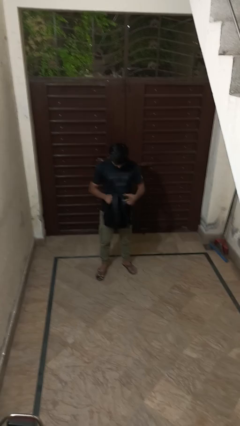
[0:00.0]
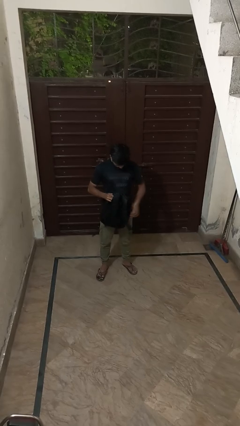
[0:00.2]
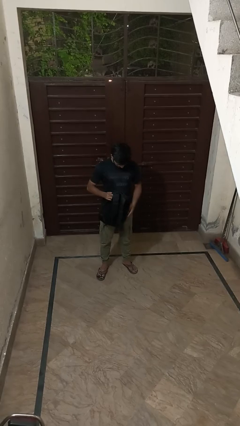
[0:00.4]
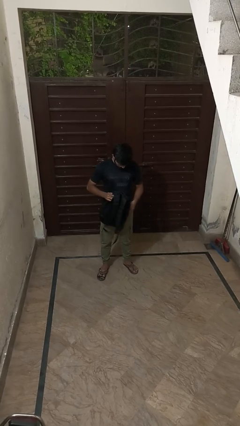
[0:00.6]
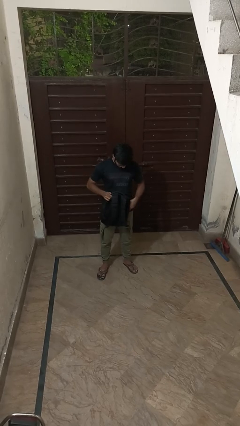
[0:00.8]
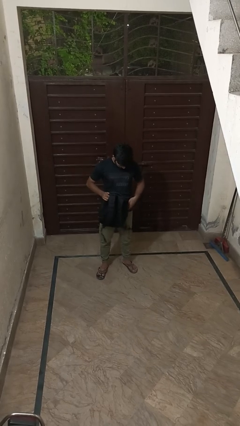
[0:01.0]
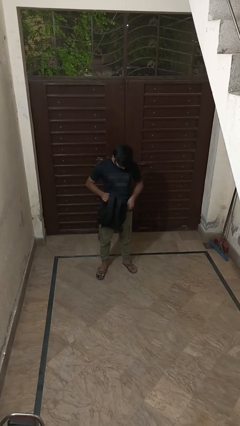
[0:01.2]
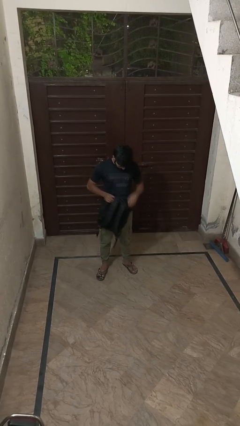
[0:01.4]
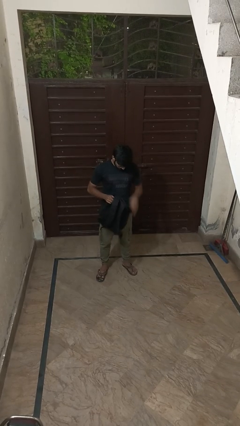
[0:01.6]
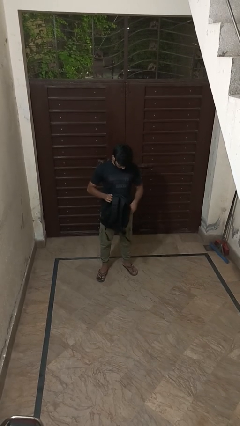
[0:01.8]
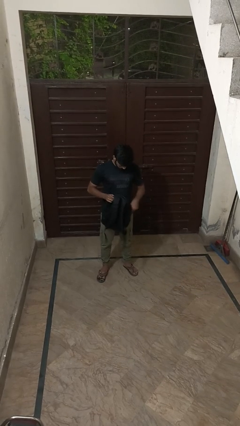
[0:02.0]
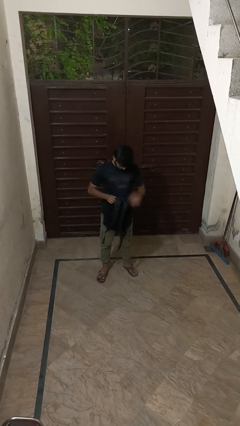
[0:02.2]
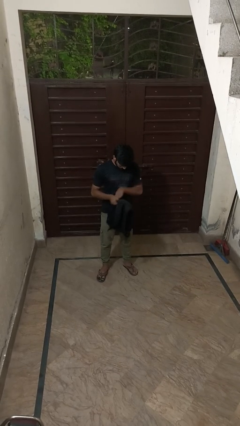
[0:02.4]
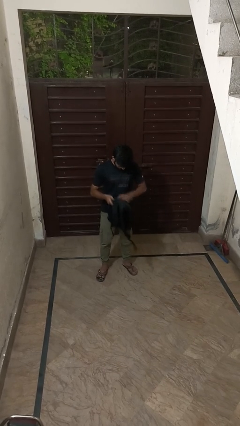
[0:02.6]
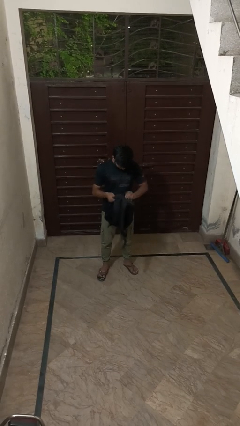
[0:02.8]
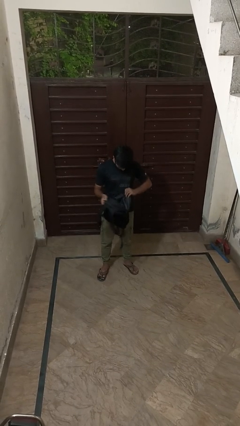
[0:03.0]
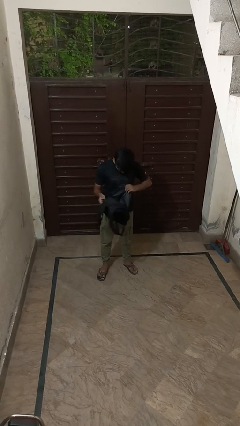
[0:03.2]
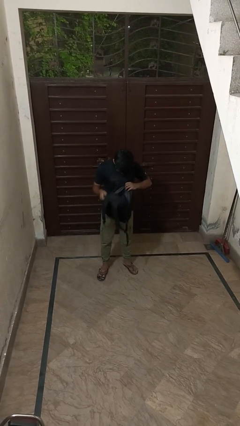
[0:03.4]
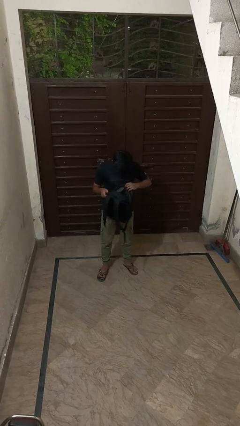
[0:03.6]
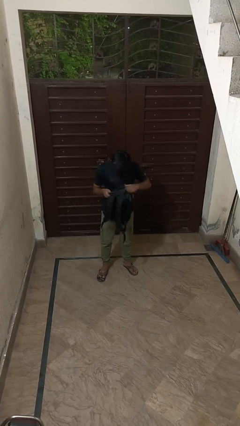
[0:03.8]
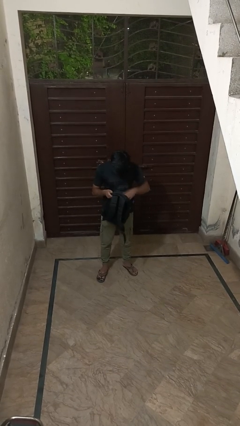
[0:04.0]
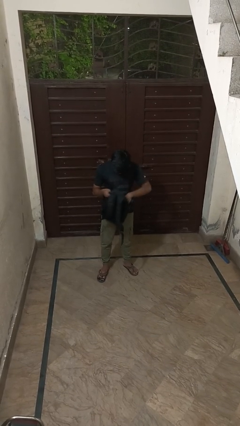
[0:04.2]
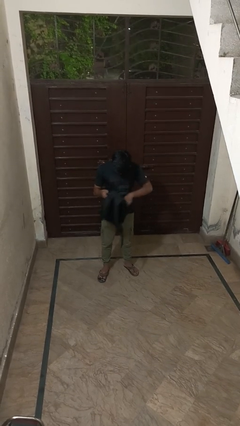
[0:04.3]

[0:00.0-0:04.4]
person searches in backpack

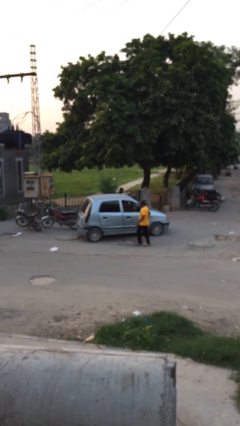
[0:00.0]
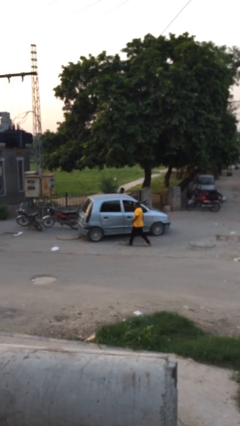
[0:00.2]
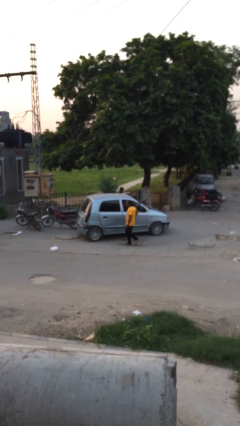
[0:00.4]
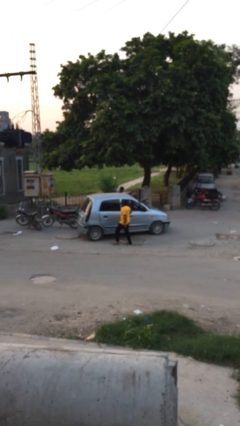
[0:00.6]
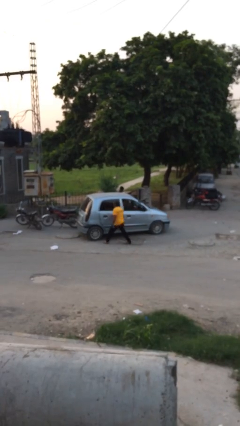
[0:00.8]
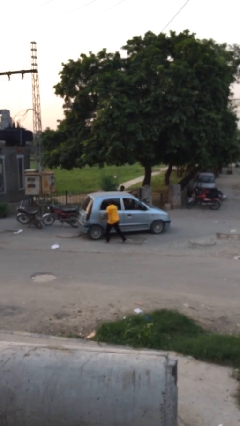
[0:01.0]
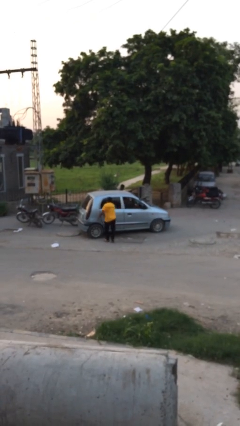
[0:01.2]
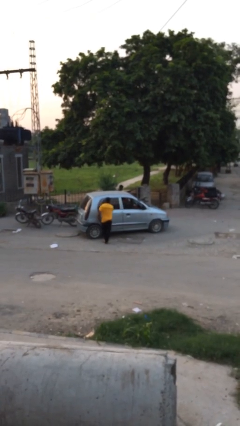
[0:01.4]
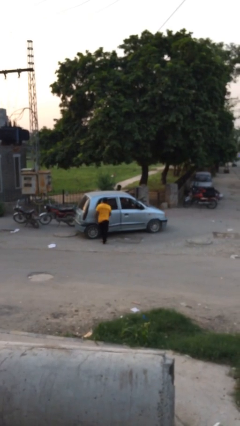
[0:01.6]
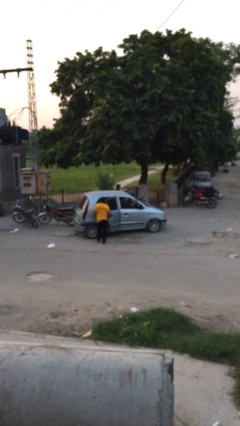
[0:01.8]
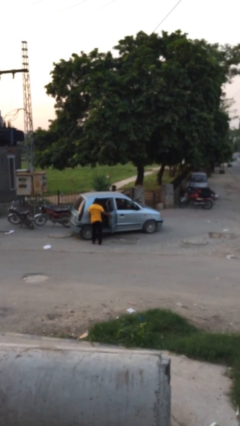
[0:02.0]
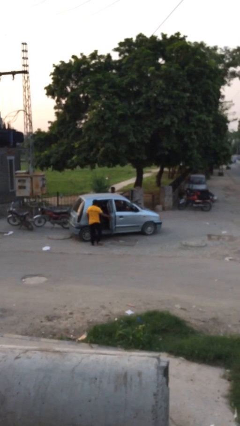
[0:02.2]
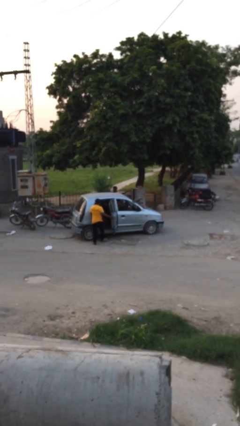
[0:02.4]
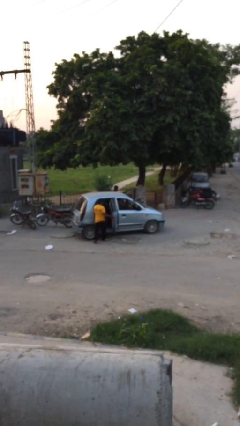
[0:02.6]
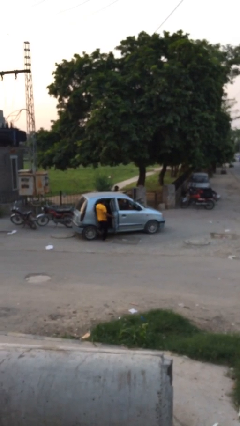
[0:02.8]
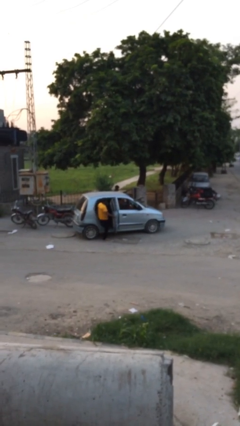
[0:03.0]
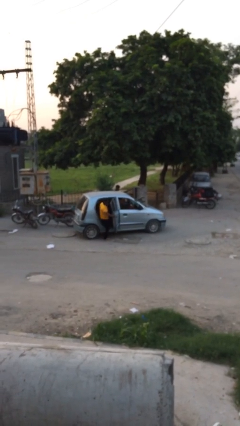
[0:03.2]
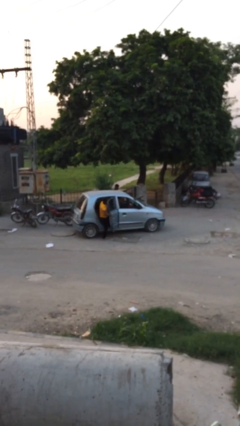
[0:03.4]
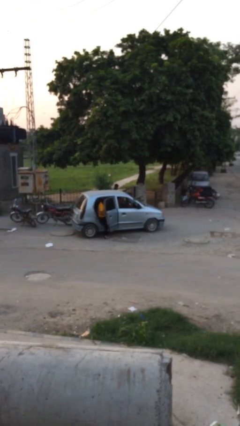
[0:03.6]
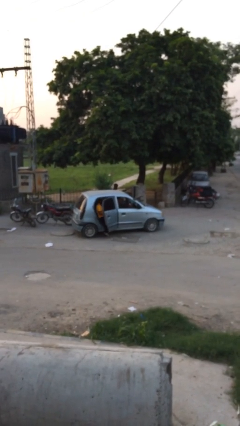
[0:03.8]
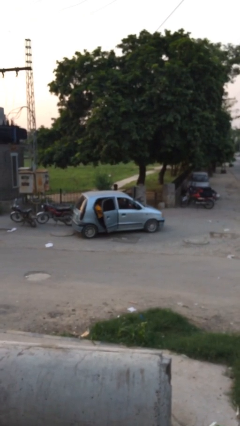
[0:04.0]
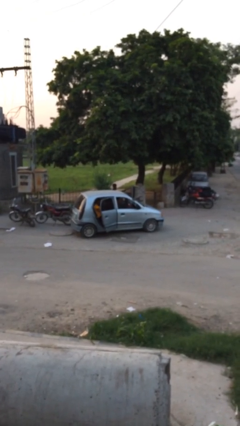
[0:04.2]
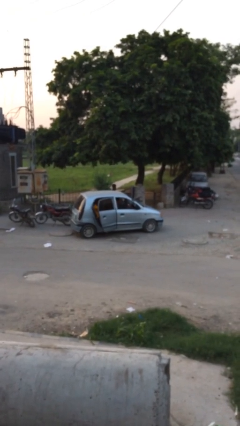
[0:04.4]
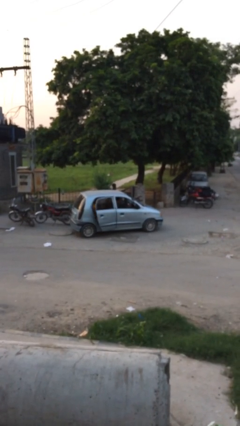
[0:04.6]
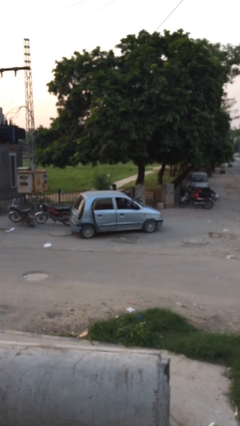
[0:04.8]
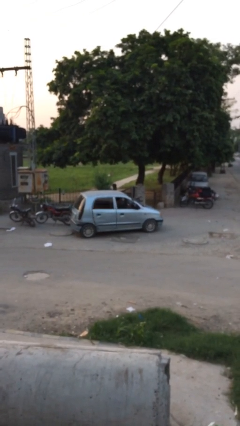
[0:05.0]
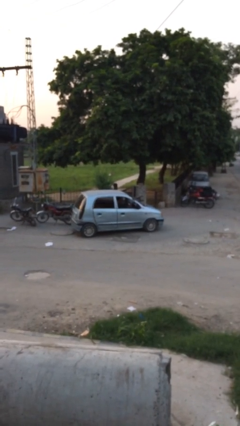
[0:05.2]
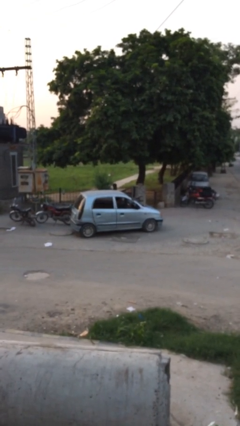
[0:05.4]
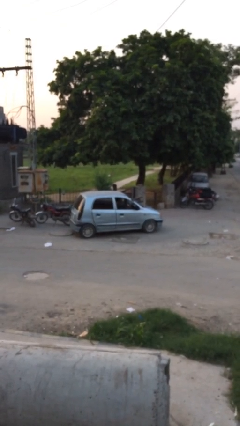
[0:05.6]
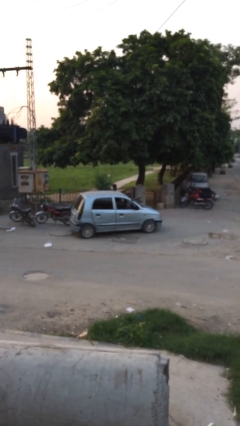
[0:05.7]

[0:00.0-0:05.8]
car picks up person

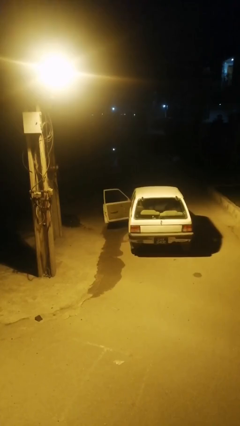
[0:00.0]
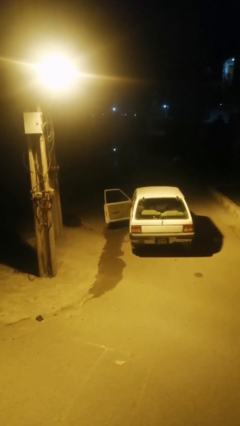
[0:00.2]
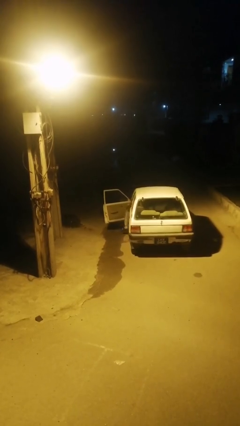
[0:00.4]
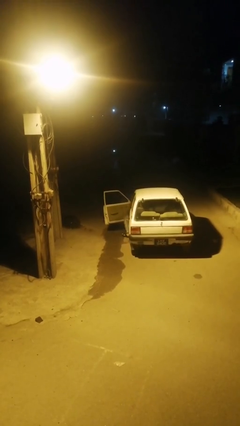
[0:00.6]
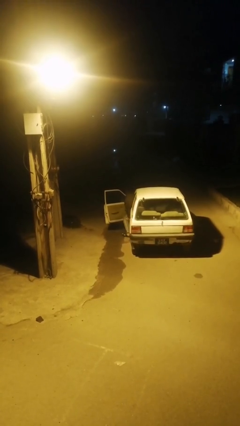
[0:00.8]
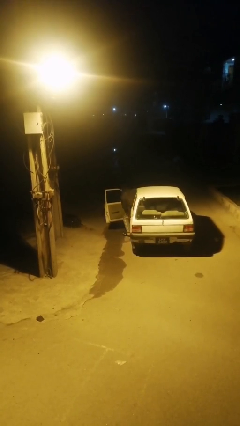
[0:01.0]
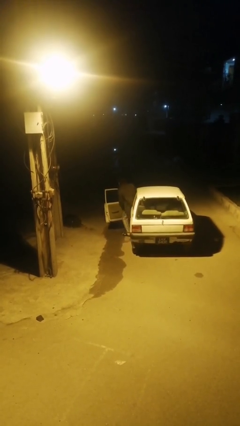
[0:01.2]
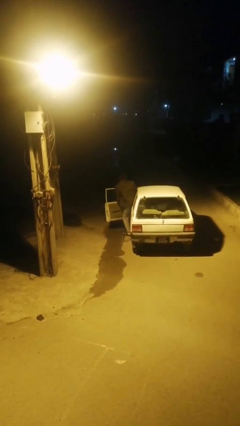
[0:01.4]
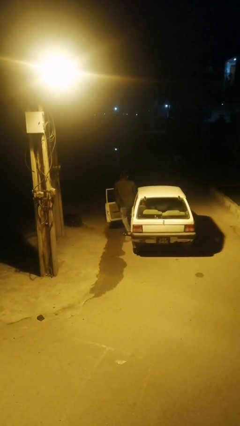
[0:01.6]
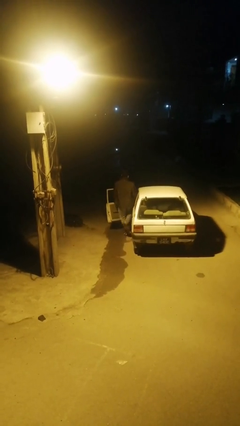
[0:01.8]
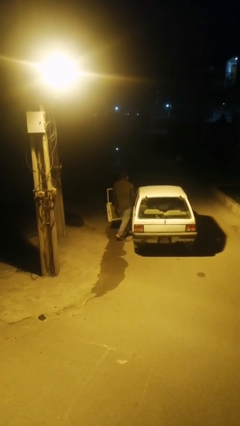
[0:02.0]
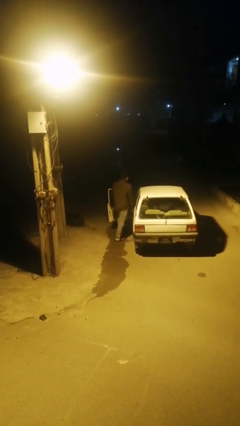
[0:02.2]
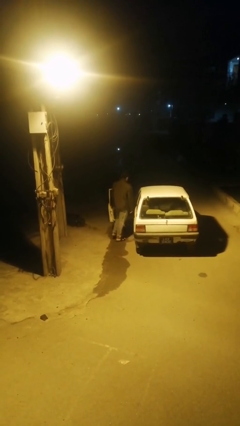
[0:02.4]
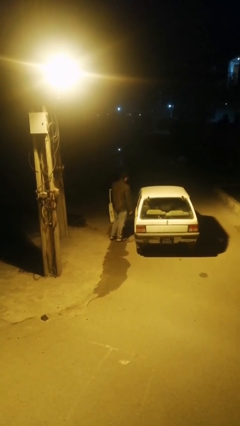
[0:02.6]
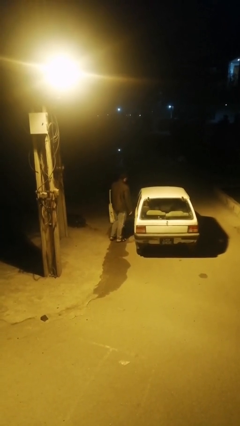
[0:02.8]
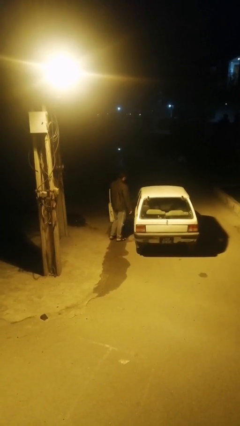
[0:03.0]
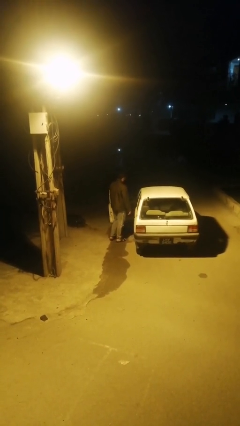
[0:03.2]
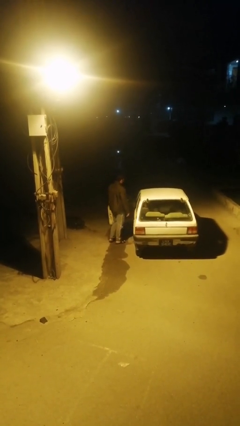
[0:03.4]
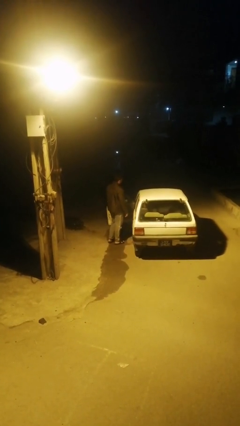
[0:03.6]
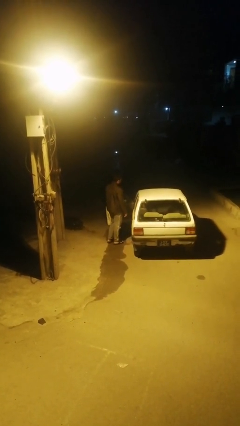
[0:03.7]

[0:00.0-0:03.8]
person exits car

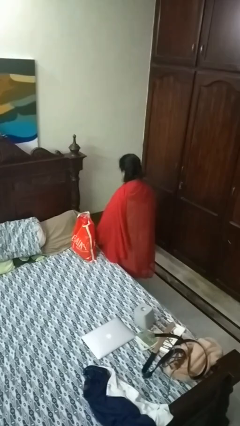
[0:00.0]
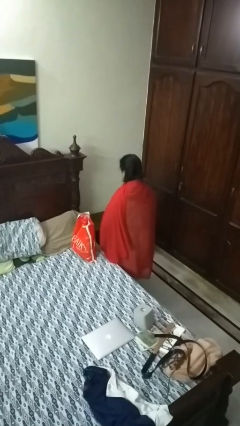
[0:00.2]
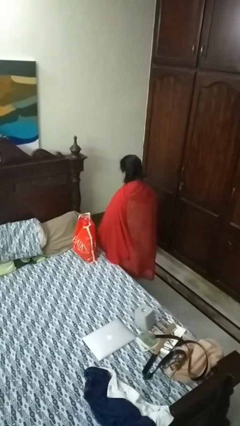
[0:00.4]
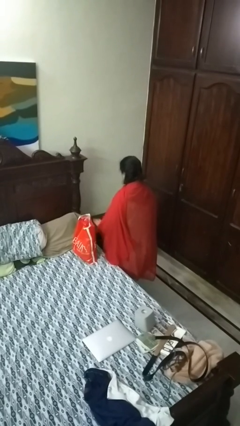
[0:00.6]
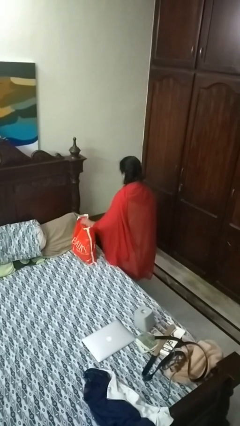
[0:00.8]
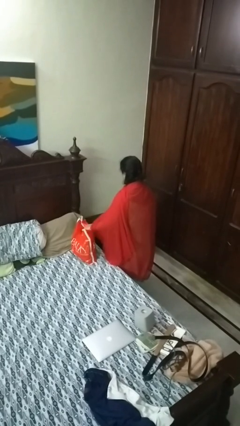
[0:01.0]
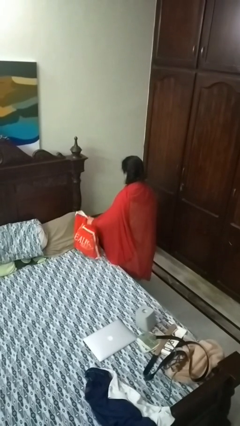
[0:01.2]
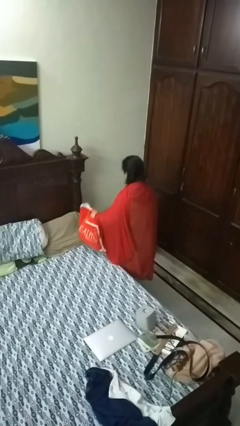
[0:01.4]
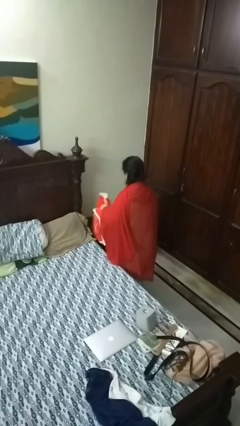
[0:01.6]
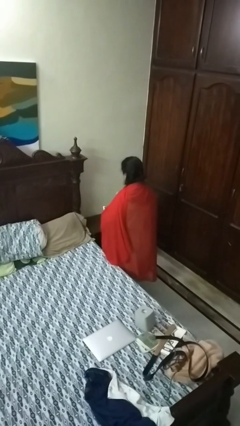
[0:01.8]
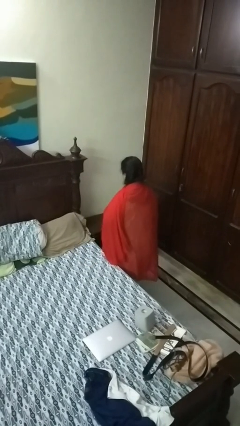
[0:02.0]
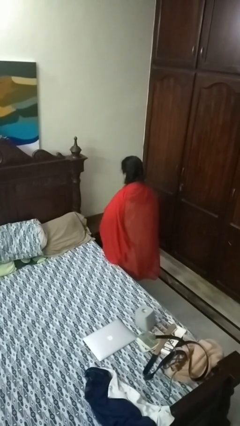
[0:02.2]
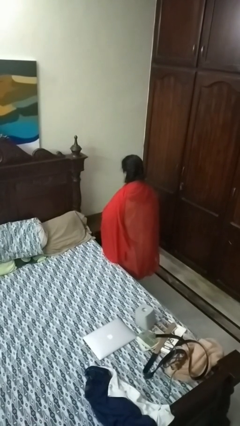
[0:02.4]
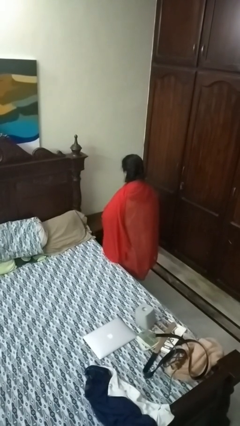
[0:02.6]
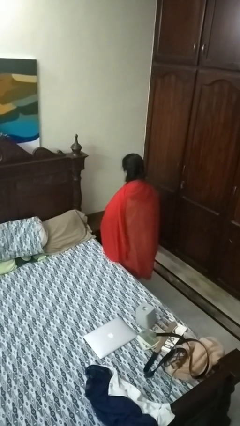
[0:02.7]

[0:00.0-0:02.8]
person picks up object from bed

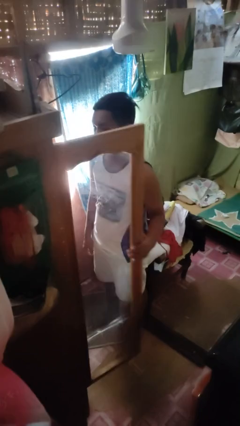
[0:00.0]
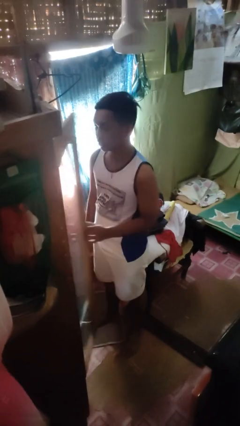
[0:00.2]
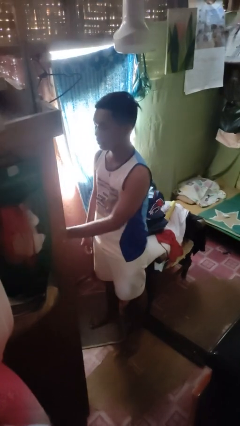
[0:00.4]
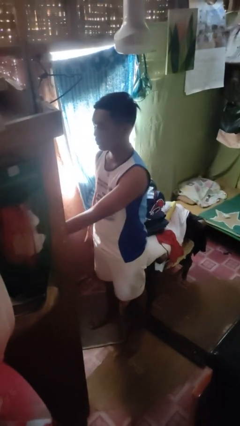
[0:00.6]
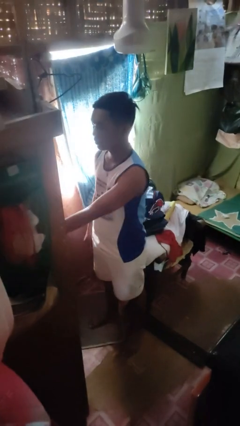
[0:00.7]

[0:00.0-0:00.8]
person closes closet door
